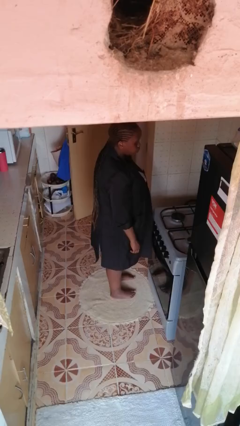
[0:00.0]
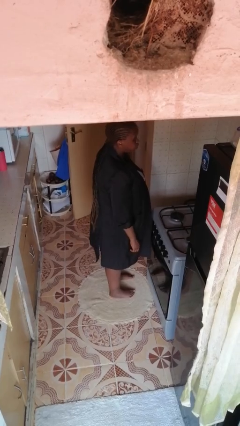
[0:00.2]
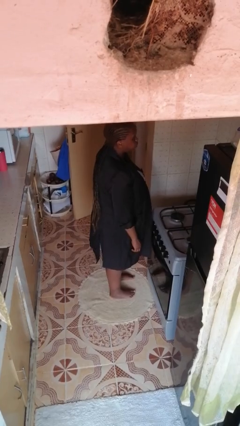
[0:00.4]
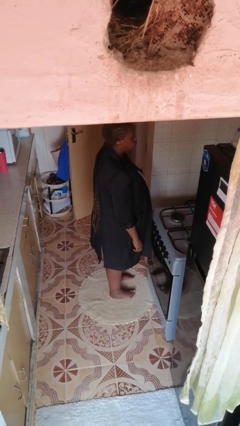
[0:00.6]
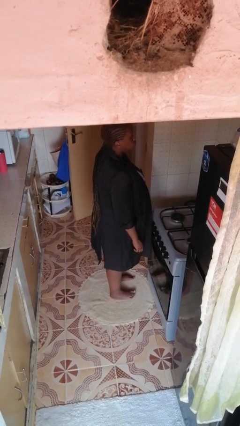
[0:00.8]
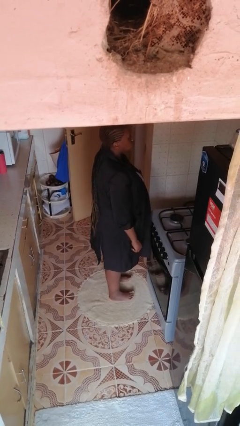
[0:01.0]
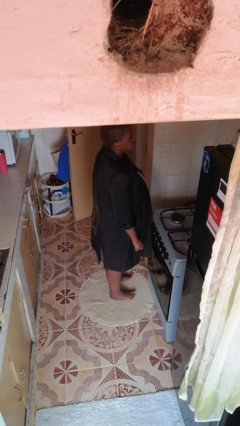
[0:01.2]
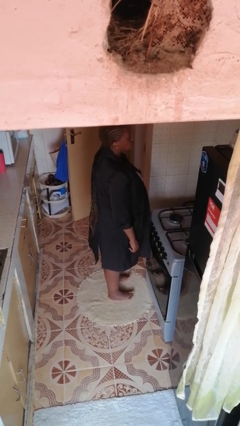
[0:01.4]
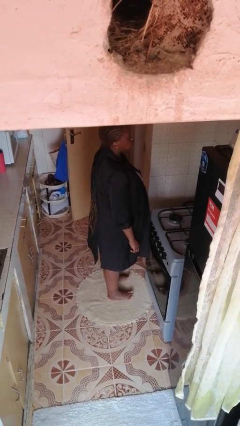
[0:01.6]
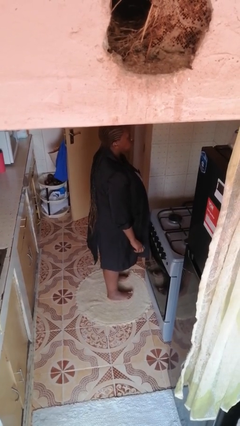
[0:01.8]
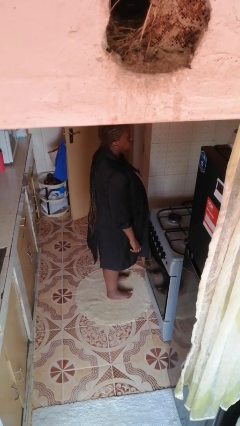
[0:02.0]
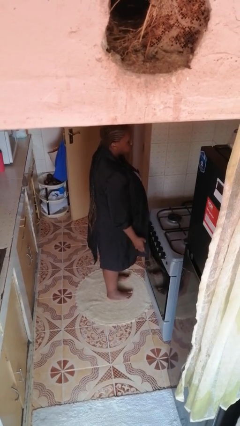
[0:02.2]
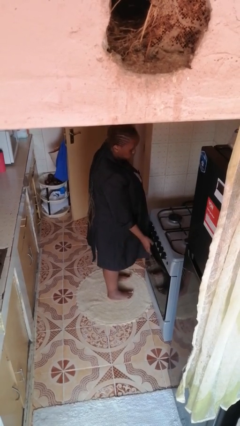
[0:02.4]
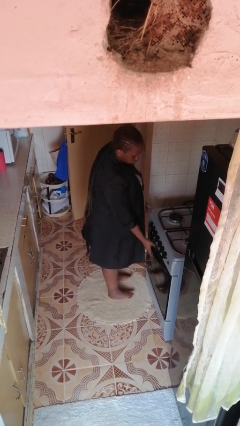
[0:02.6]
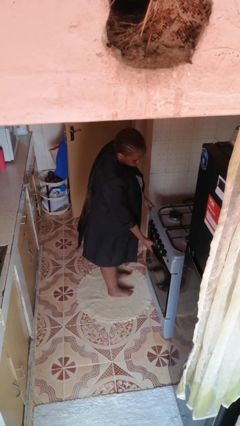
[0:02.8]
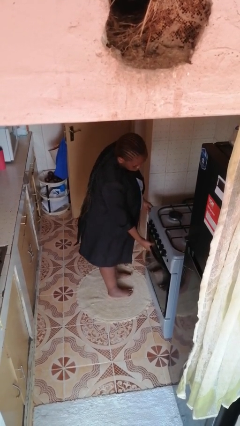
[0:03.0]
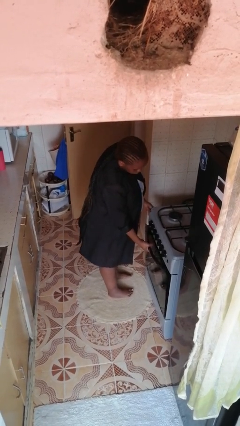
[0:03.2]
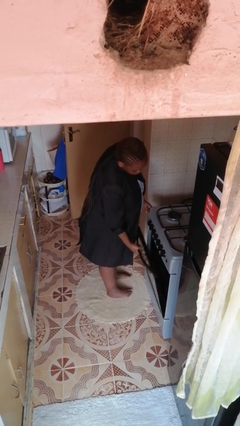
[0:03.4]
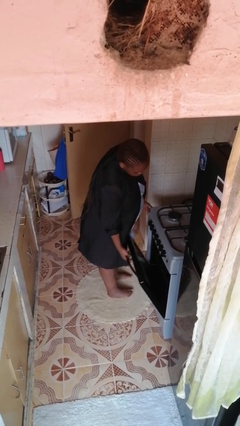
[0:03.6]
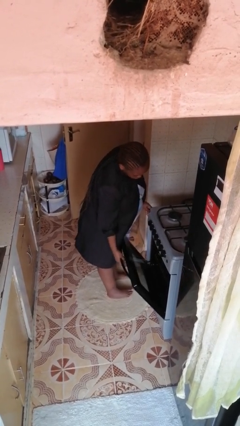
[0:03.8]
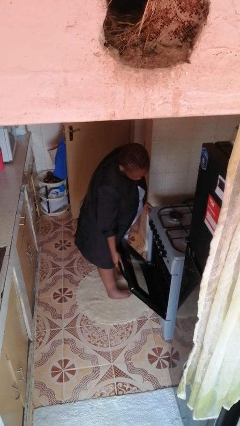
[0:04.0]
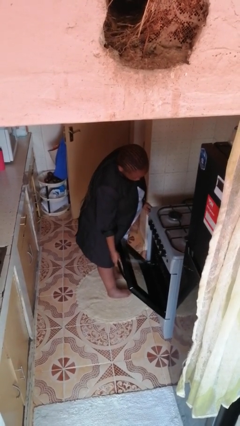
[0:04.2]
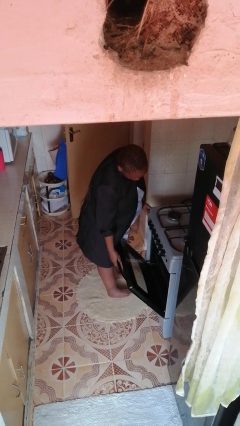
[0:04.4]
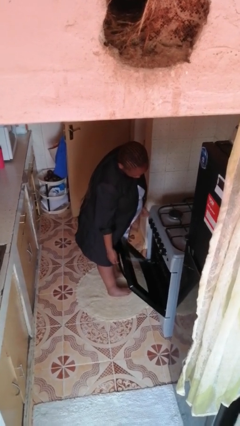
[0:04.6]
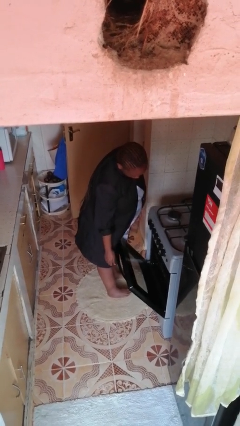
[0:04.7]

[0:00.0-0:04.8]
person opens oven door

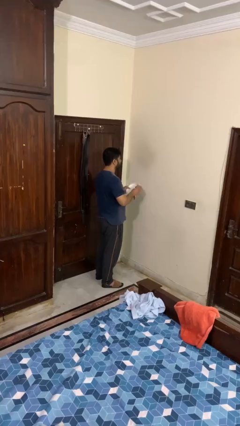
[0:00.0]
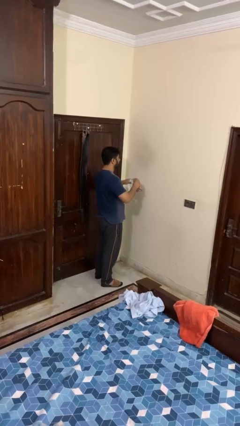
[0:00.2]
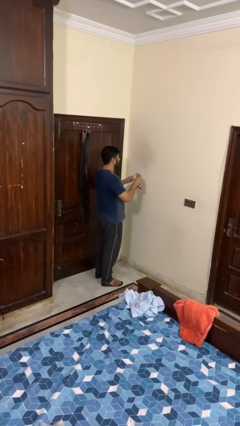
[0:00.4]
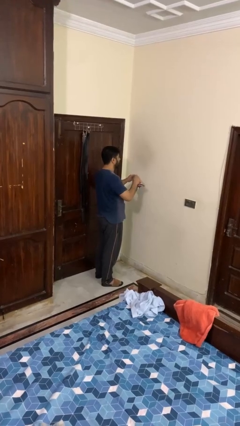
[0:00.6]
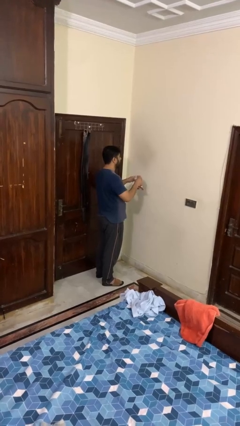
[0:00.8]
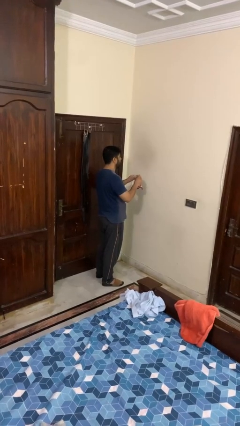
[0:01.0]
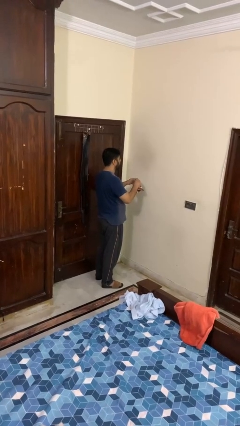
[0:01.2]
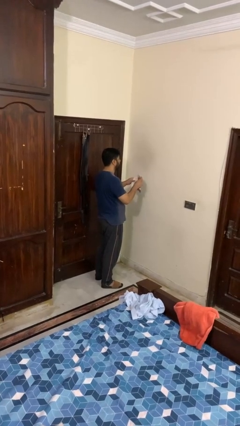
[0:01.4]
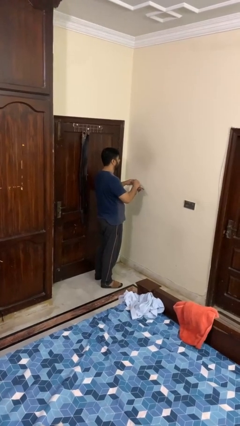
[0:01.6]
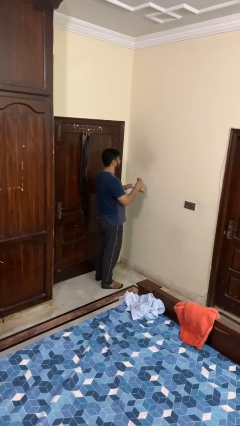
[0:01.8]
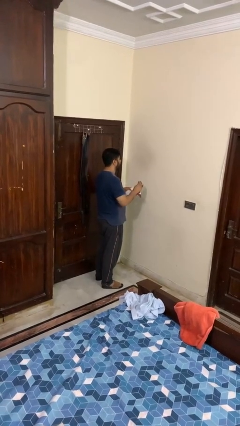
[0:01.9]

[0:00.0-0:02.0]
person dries dish

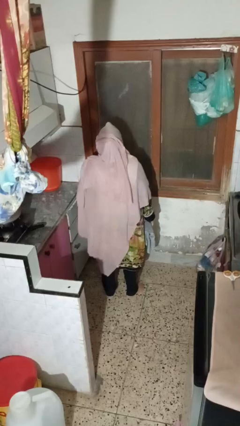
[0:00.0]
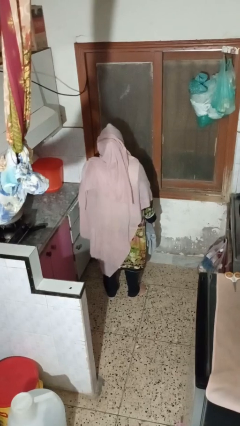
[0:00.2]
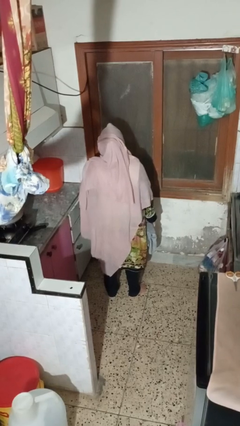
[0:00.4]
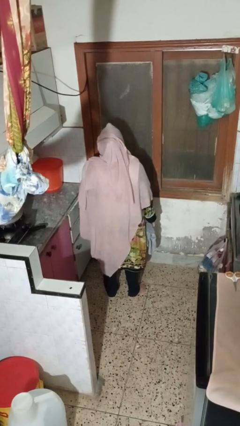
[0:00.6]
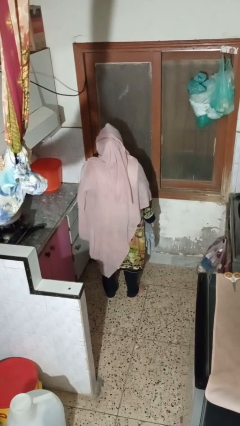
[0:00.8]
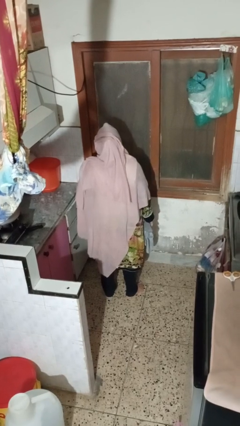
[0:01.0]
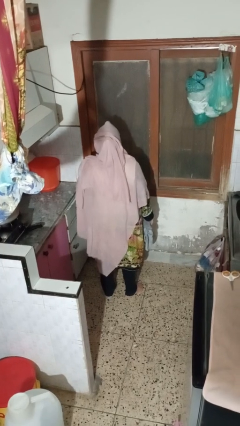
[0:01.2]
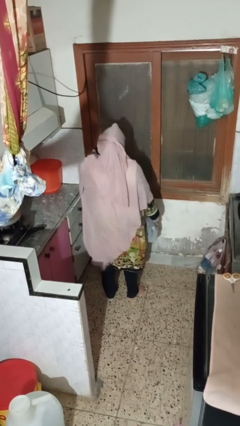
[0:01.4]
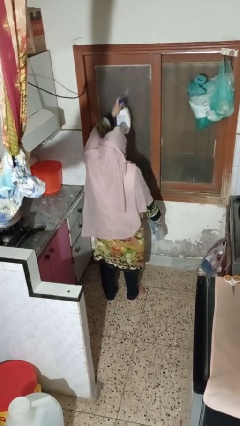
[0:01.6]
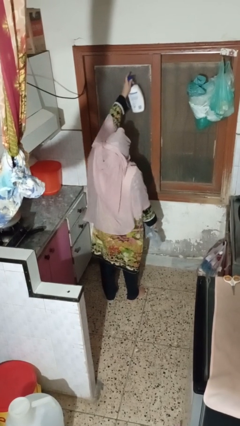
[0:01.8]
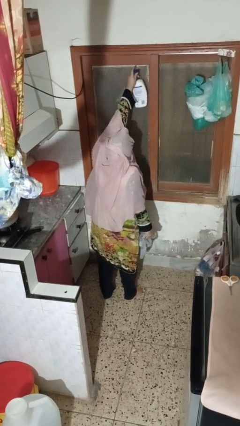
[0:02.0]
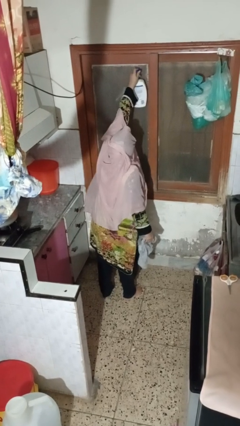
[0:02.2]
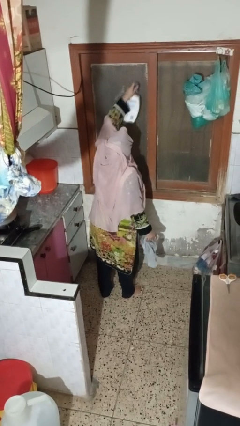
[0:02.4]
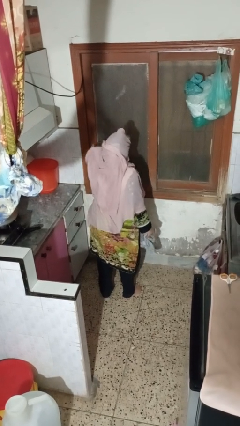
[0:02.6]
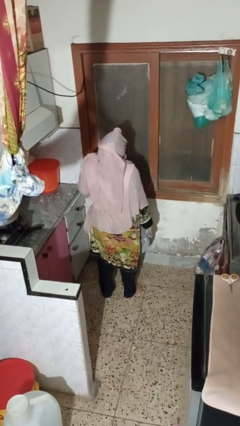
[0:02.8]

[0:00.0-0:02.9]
person sprays from bottle

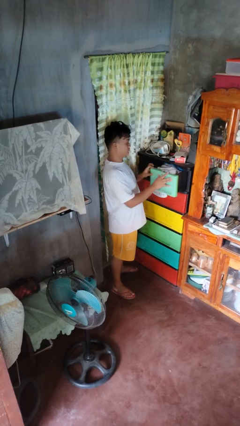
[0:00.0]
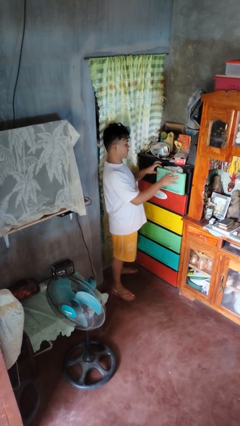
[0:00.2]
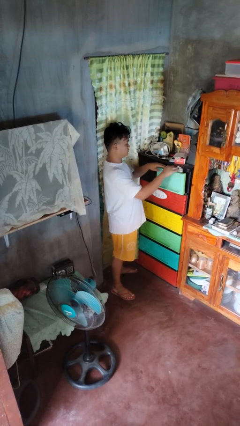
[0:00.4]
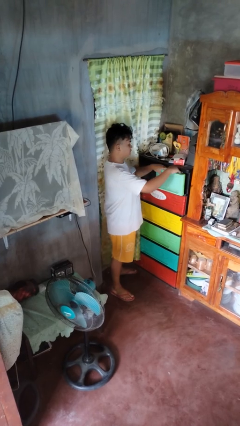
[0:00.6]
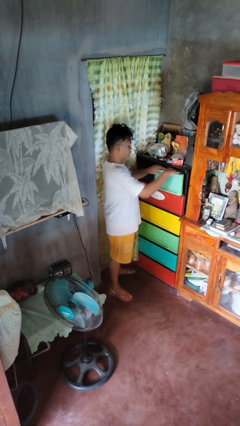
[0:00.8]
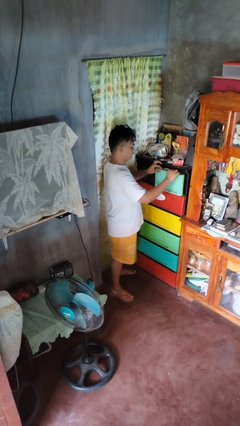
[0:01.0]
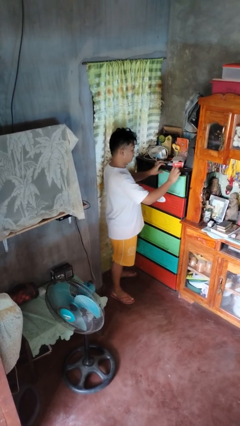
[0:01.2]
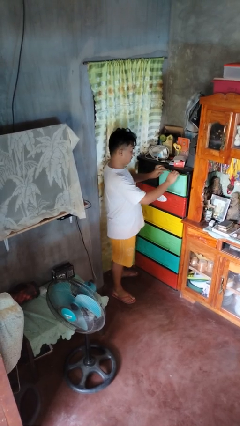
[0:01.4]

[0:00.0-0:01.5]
person closes dresser drawer

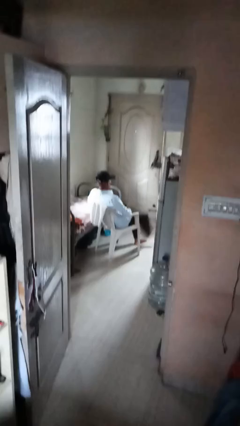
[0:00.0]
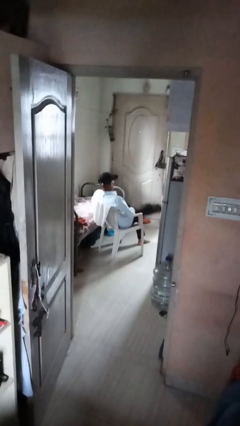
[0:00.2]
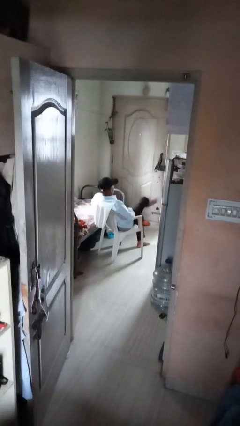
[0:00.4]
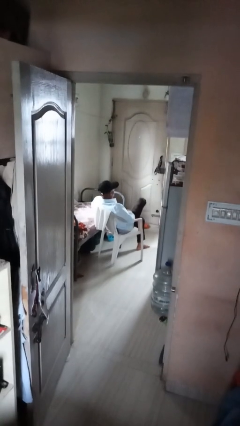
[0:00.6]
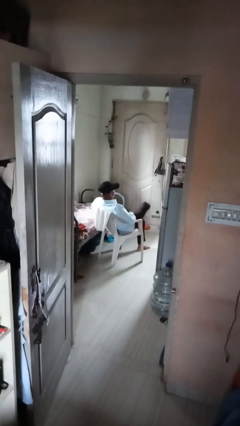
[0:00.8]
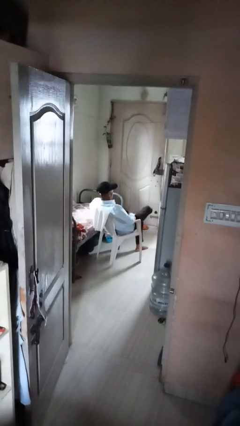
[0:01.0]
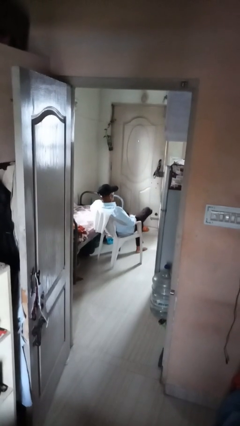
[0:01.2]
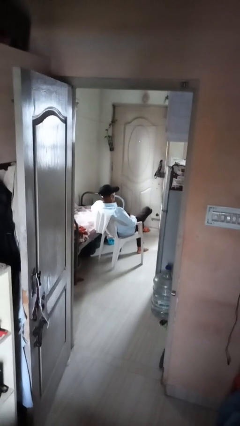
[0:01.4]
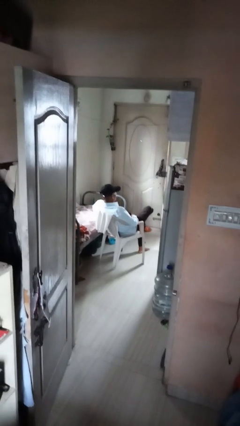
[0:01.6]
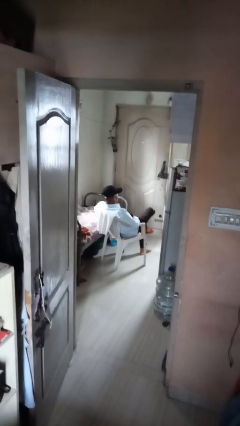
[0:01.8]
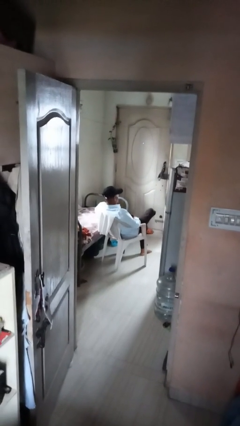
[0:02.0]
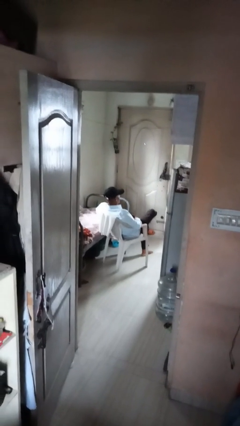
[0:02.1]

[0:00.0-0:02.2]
person crosses legs

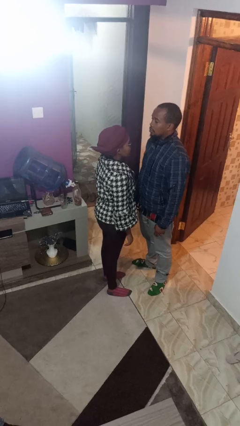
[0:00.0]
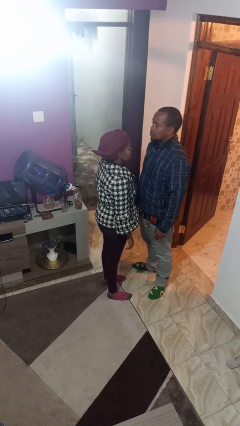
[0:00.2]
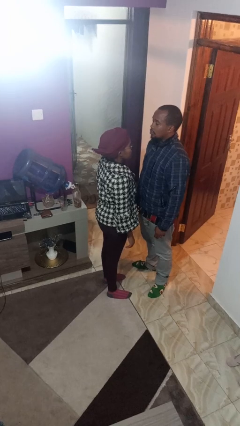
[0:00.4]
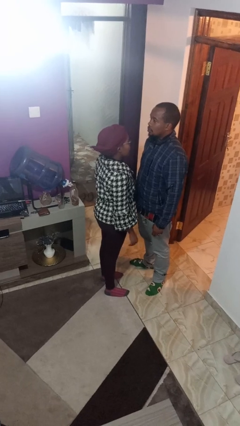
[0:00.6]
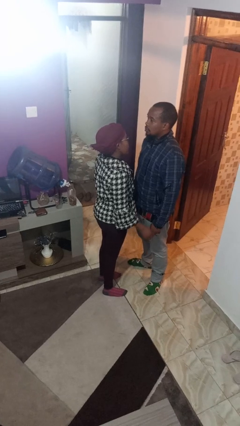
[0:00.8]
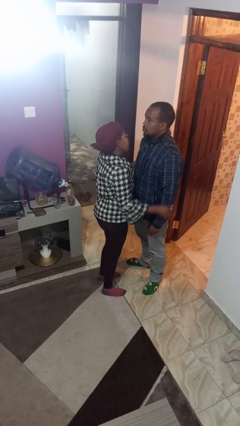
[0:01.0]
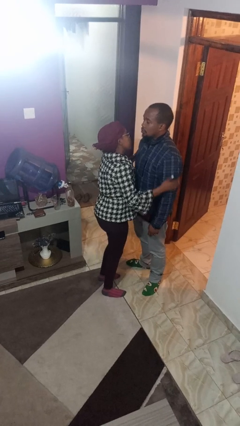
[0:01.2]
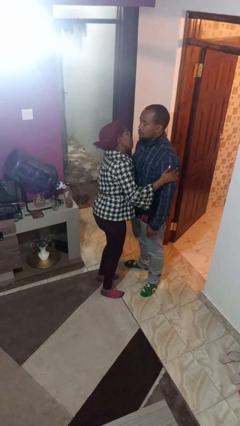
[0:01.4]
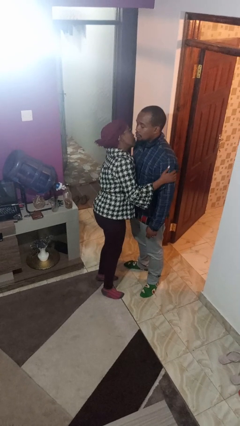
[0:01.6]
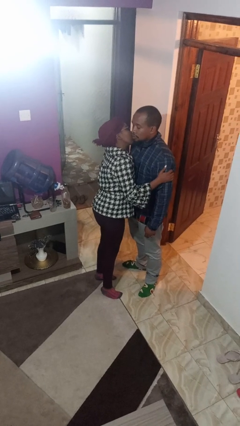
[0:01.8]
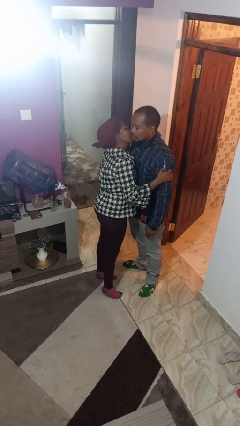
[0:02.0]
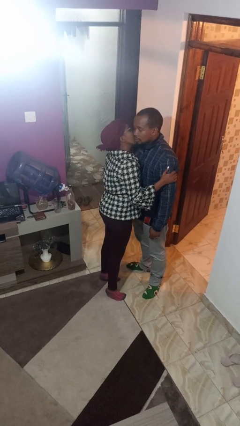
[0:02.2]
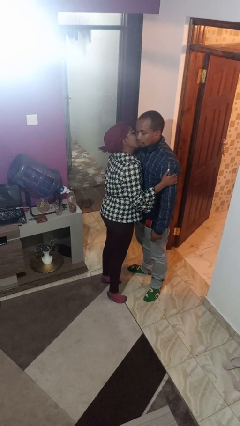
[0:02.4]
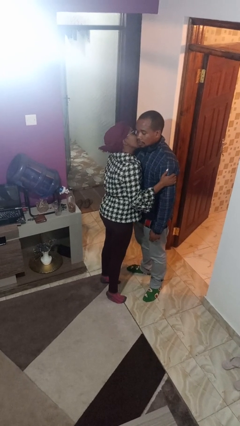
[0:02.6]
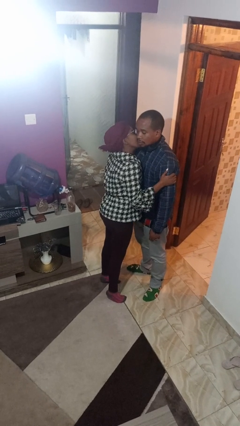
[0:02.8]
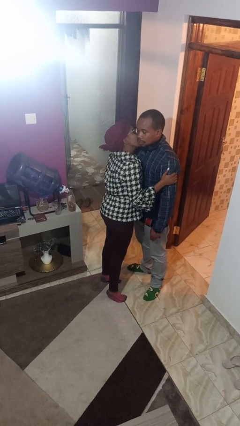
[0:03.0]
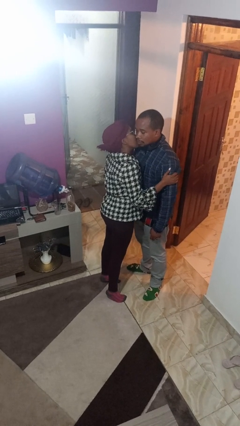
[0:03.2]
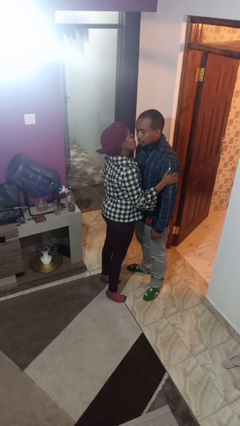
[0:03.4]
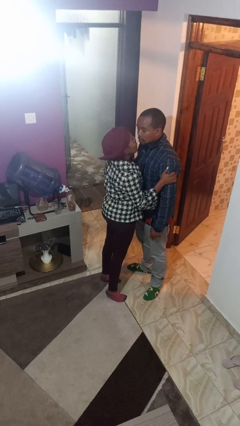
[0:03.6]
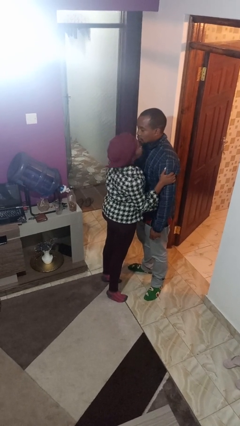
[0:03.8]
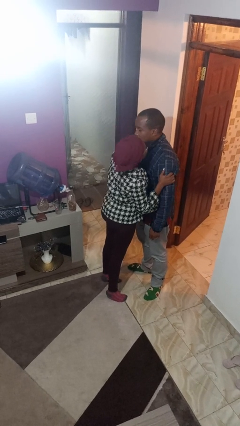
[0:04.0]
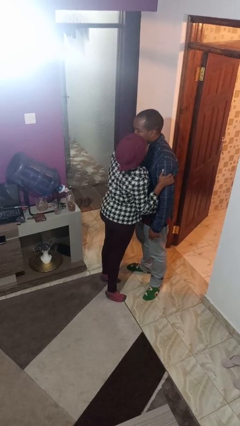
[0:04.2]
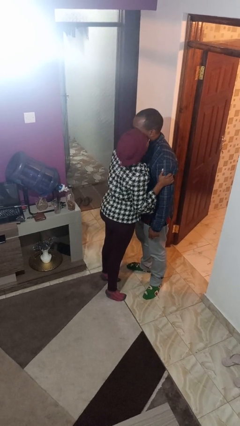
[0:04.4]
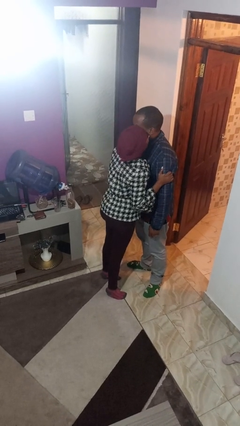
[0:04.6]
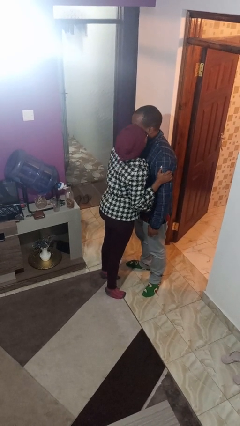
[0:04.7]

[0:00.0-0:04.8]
person kisses cheek of person
